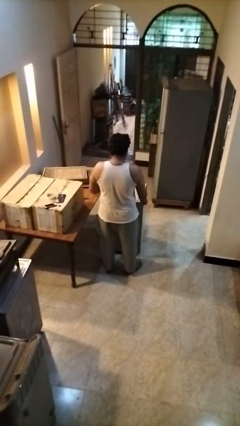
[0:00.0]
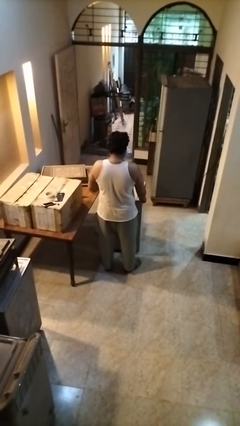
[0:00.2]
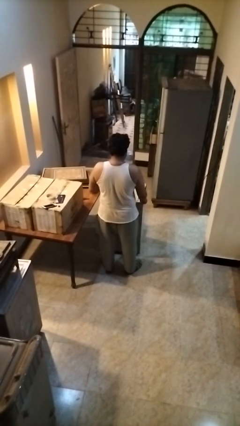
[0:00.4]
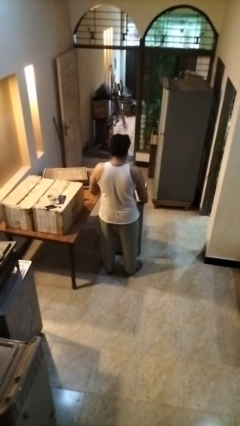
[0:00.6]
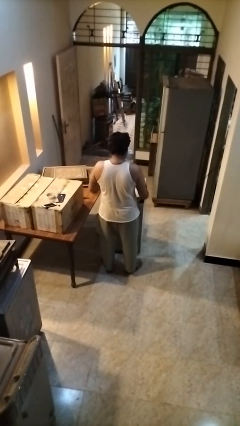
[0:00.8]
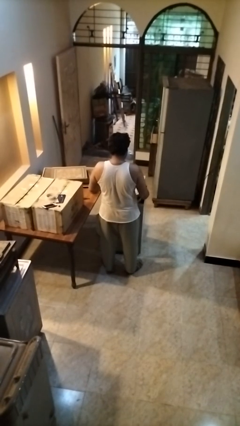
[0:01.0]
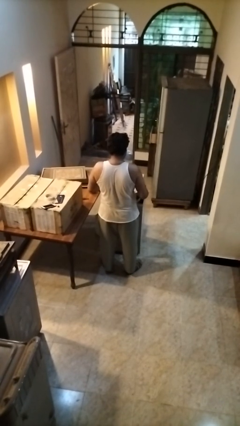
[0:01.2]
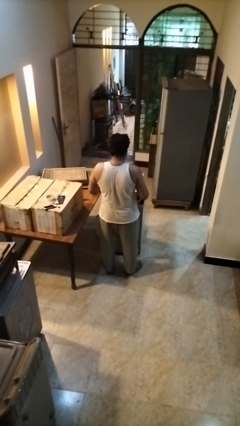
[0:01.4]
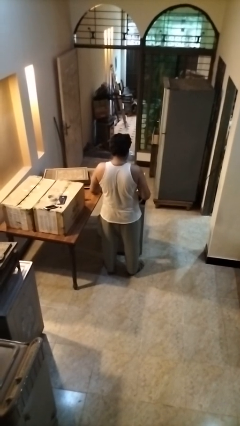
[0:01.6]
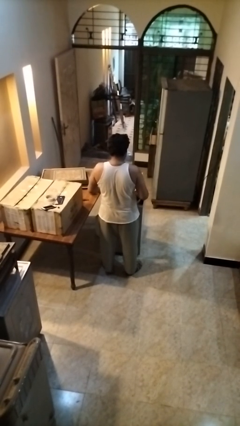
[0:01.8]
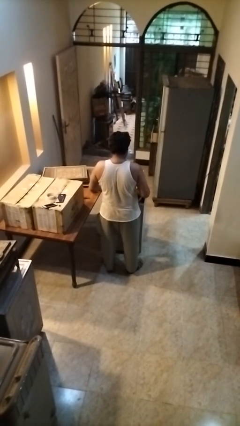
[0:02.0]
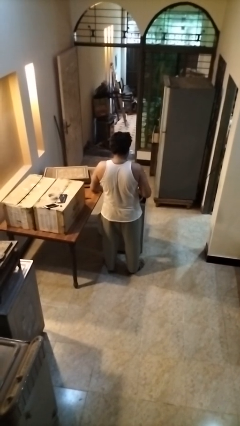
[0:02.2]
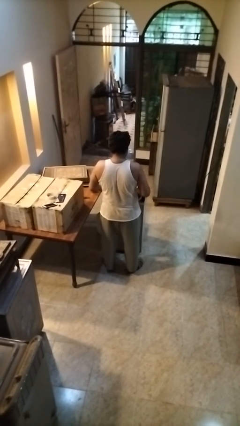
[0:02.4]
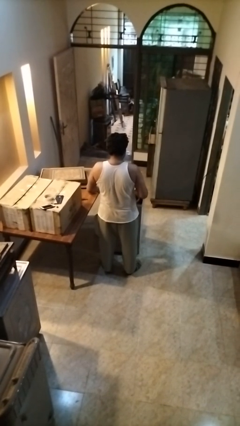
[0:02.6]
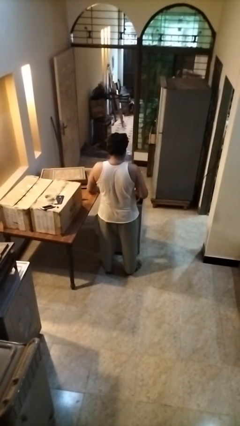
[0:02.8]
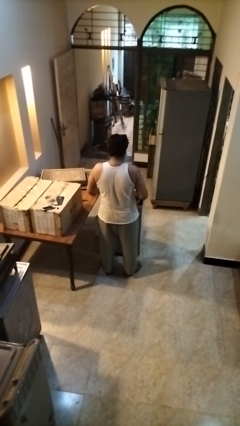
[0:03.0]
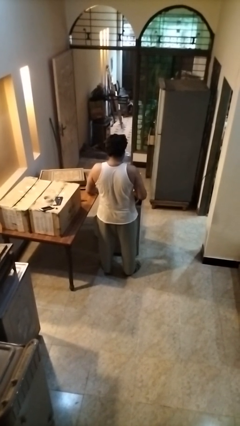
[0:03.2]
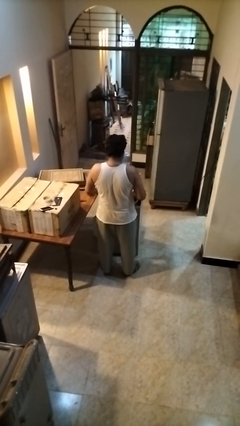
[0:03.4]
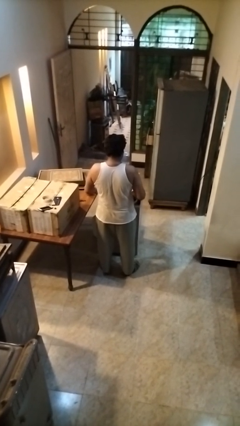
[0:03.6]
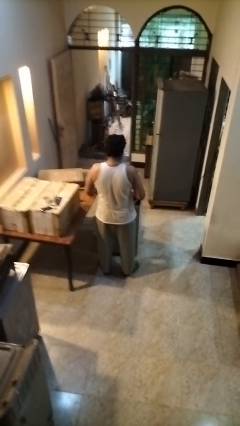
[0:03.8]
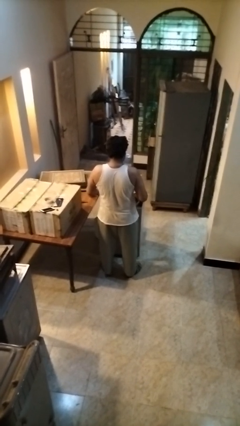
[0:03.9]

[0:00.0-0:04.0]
person opens clothes washer

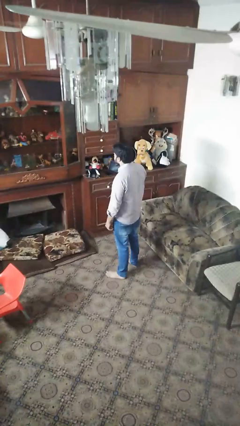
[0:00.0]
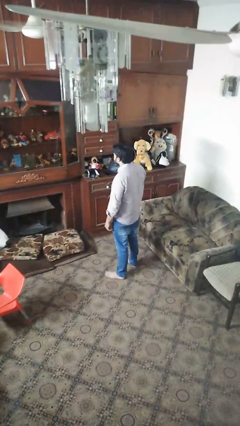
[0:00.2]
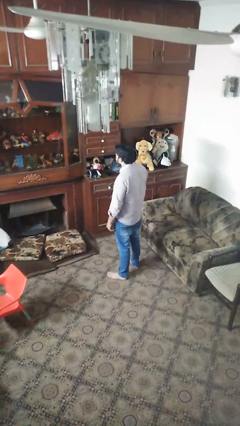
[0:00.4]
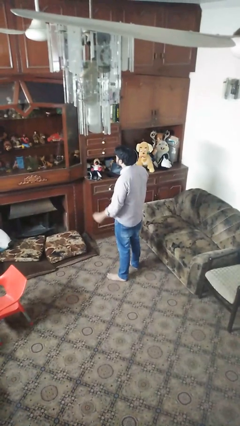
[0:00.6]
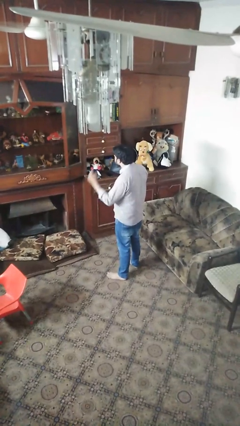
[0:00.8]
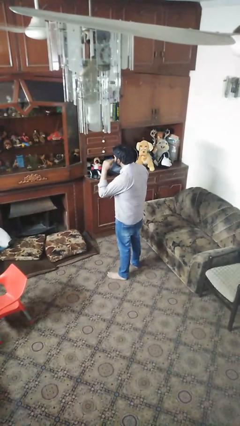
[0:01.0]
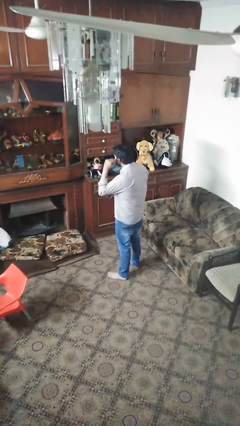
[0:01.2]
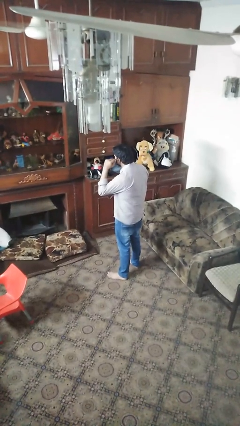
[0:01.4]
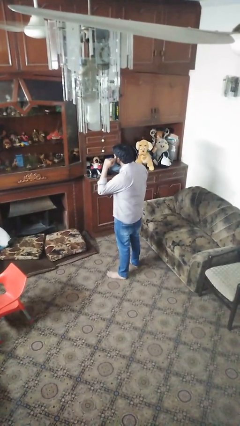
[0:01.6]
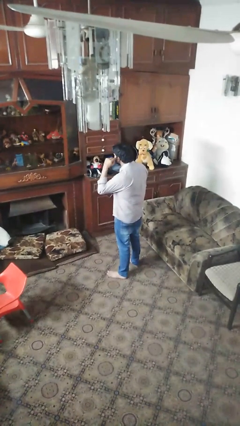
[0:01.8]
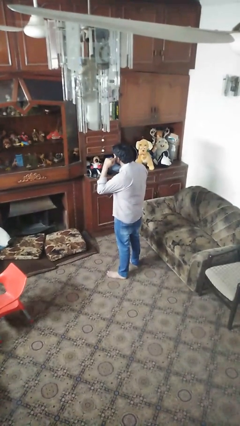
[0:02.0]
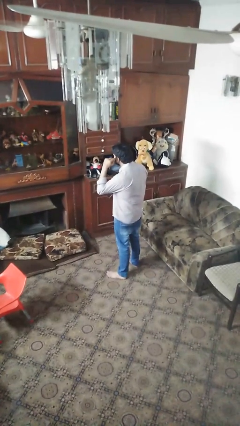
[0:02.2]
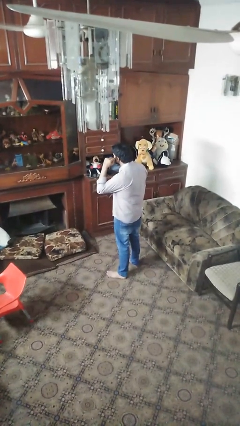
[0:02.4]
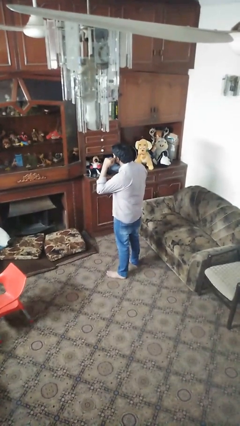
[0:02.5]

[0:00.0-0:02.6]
person gestures listen closely

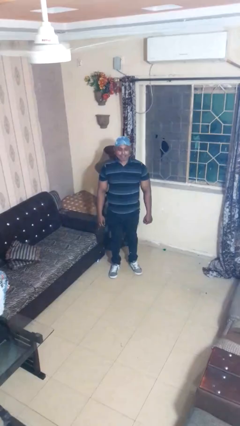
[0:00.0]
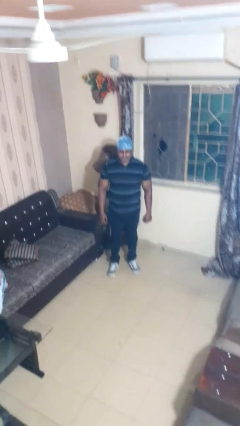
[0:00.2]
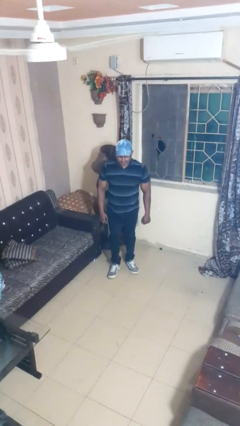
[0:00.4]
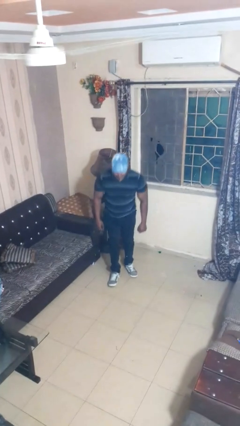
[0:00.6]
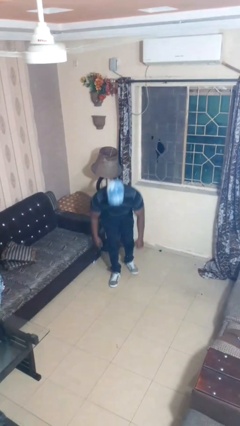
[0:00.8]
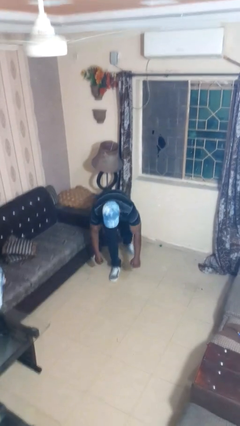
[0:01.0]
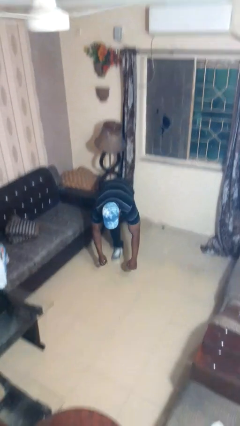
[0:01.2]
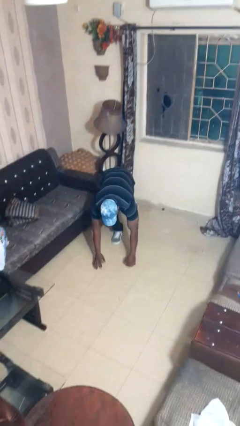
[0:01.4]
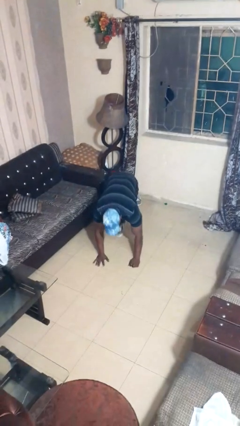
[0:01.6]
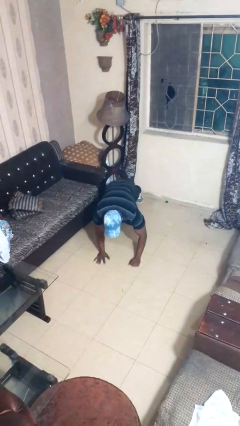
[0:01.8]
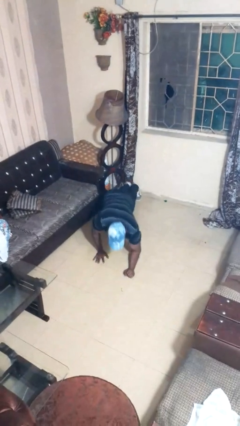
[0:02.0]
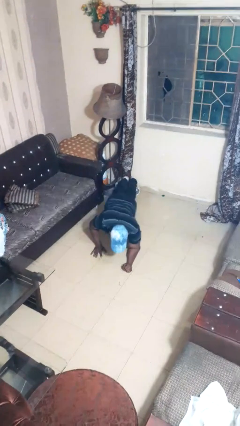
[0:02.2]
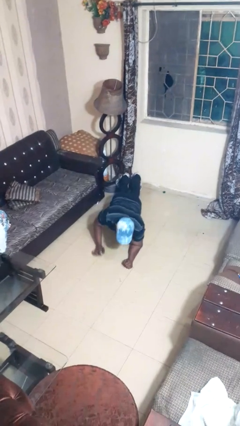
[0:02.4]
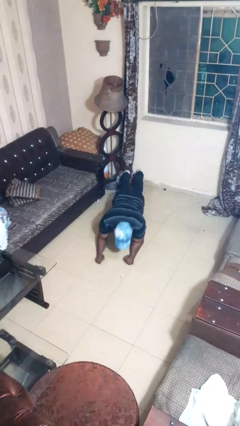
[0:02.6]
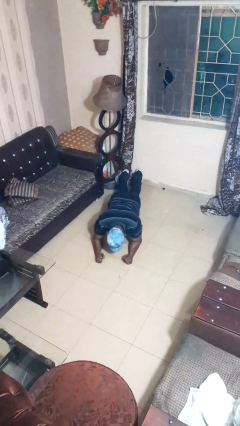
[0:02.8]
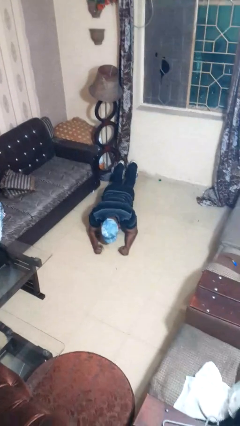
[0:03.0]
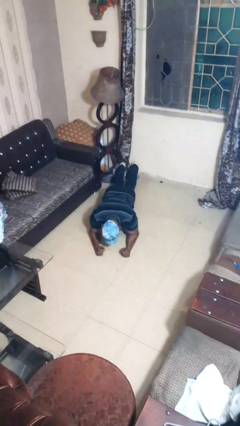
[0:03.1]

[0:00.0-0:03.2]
person exercises with plank

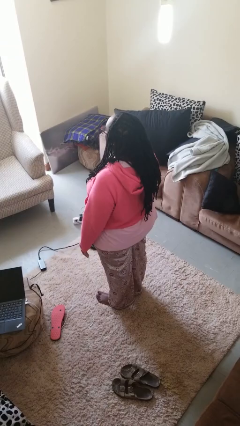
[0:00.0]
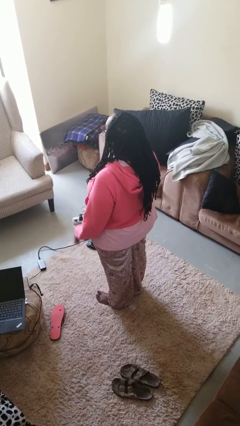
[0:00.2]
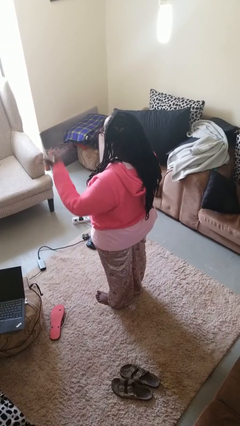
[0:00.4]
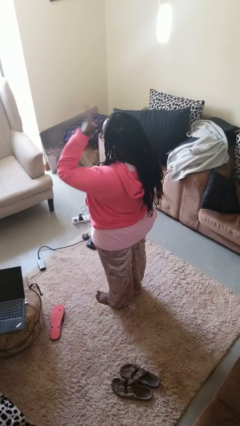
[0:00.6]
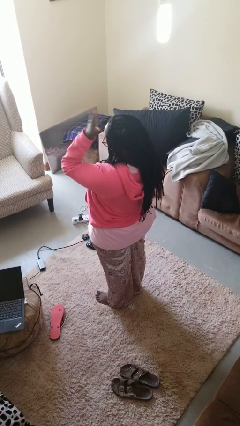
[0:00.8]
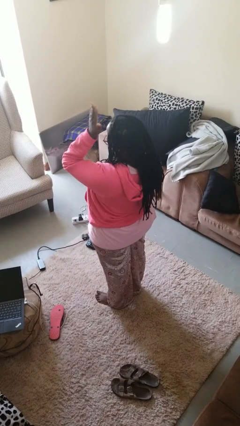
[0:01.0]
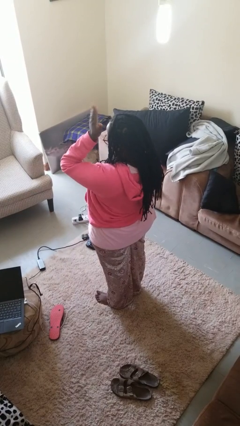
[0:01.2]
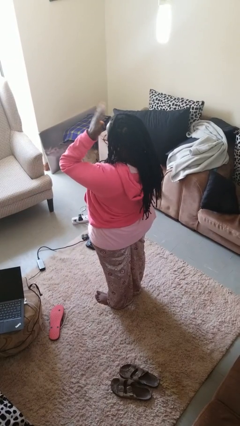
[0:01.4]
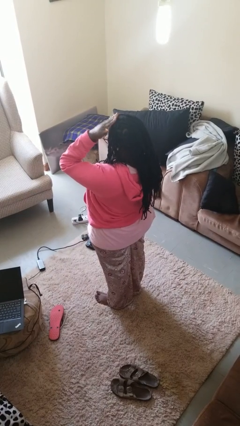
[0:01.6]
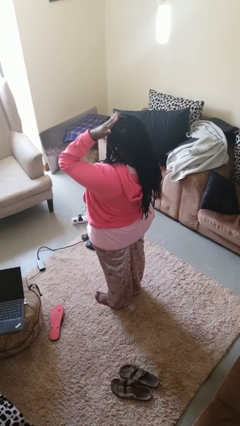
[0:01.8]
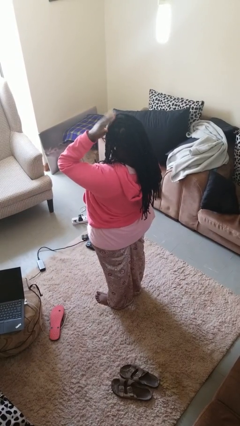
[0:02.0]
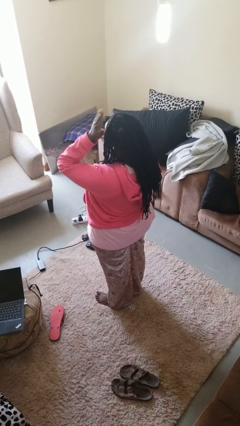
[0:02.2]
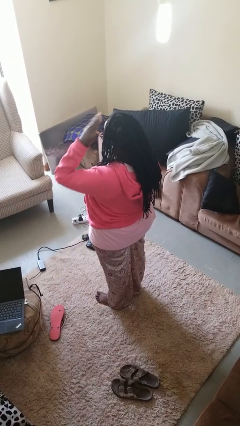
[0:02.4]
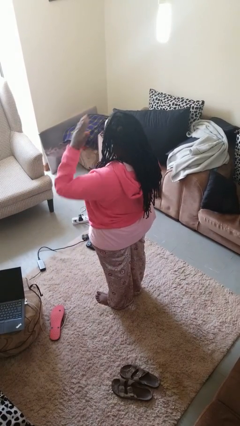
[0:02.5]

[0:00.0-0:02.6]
person pats head

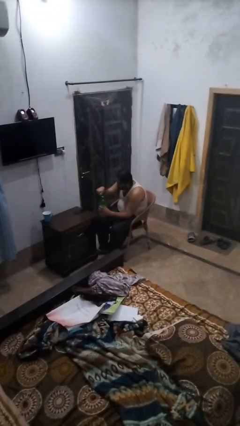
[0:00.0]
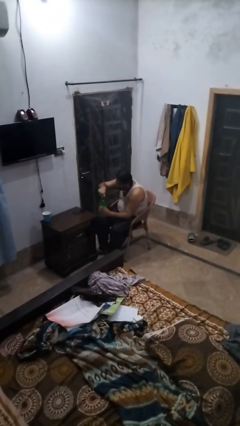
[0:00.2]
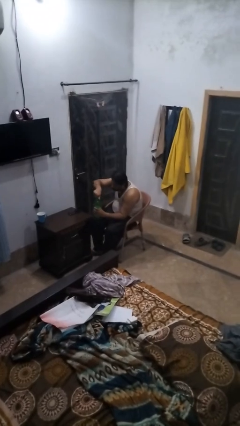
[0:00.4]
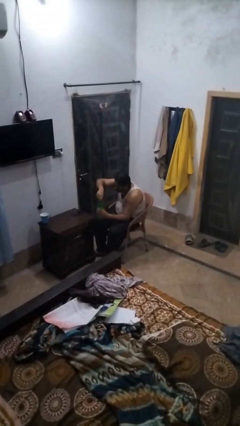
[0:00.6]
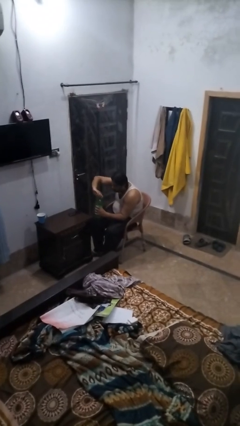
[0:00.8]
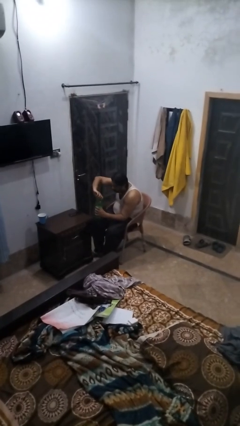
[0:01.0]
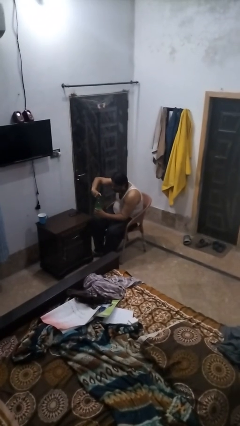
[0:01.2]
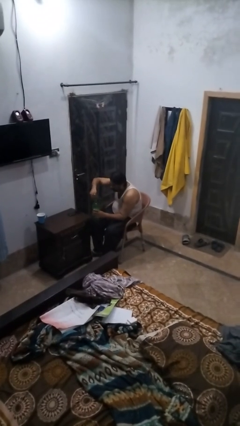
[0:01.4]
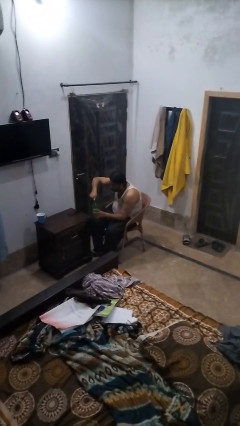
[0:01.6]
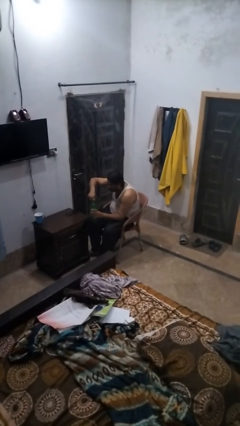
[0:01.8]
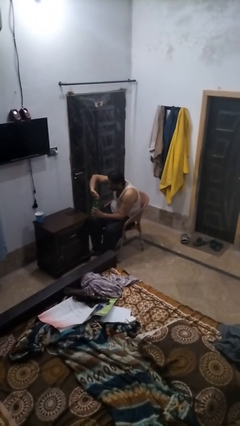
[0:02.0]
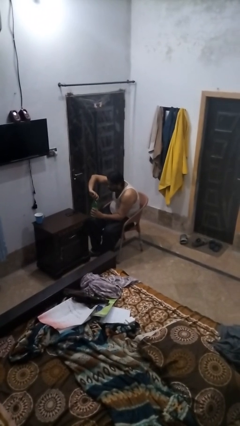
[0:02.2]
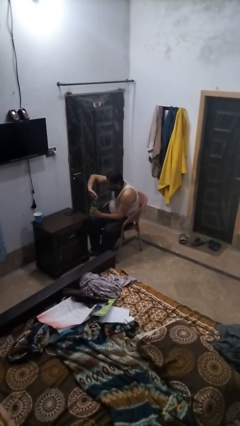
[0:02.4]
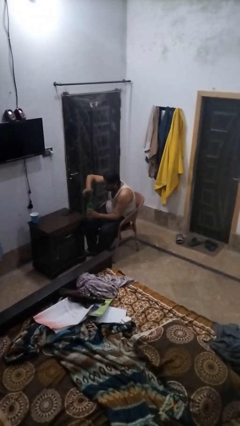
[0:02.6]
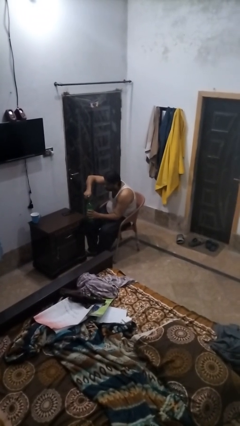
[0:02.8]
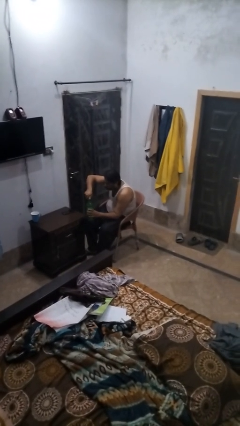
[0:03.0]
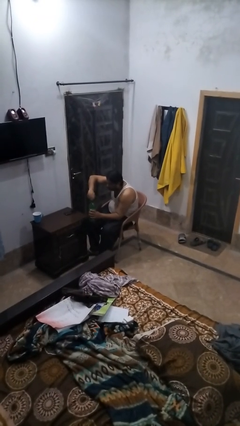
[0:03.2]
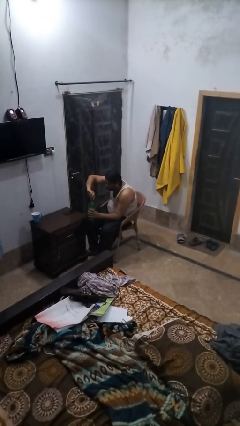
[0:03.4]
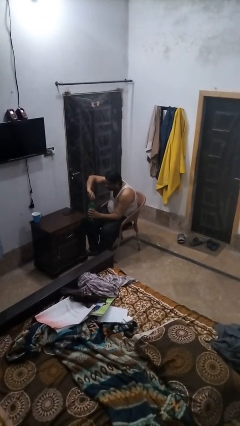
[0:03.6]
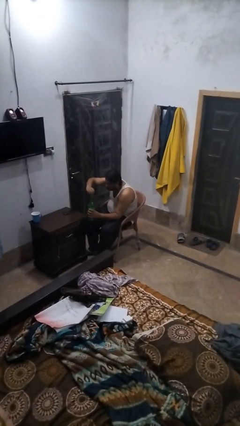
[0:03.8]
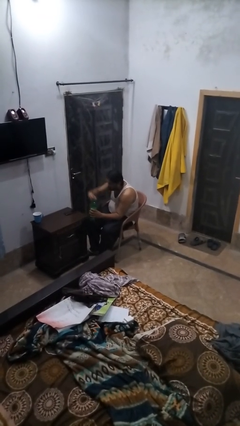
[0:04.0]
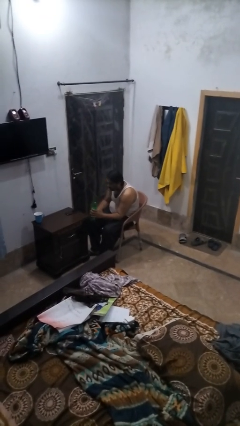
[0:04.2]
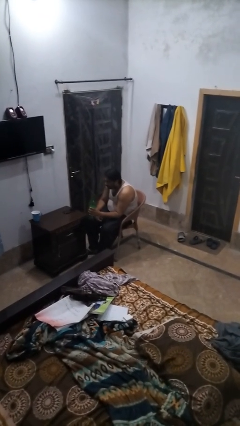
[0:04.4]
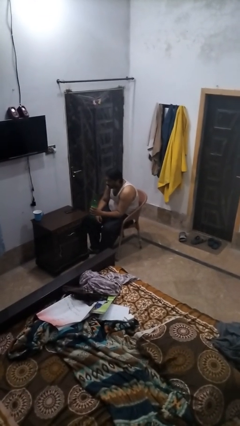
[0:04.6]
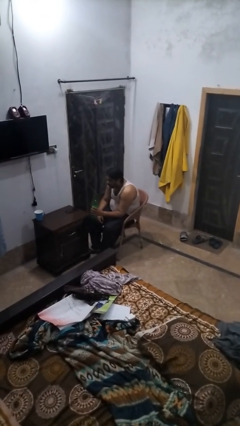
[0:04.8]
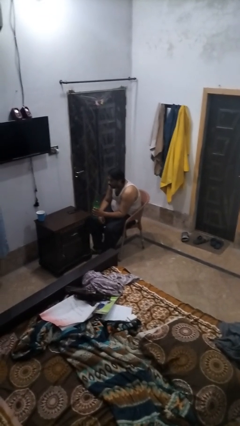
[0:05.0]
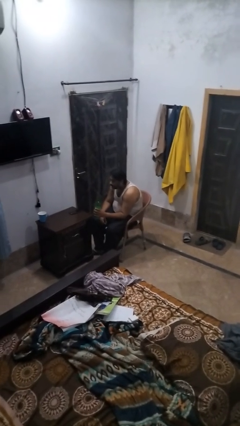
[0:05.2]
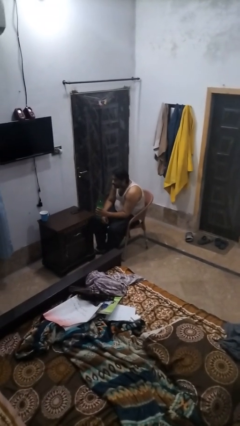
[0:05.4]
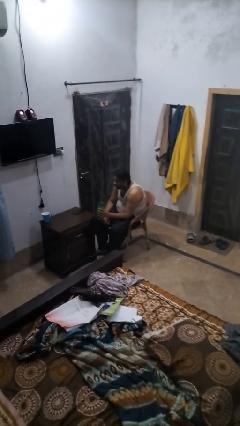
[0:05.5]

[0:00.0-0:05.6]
person unscrews lid from bottle
